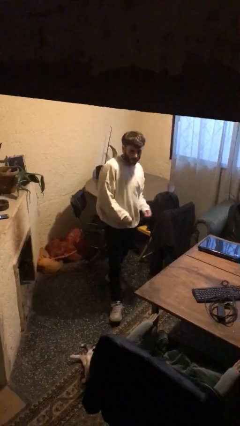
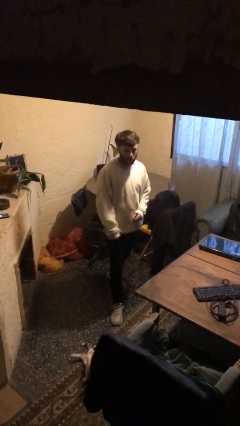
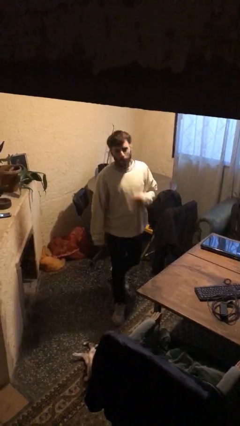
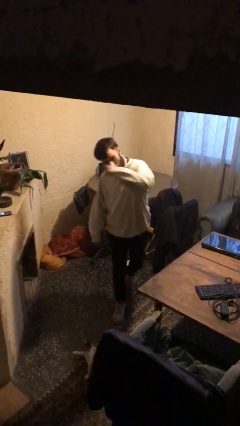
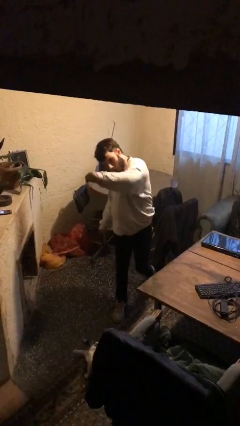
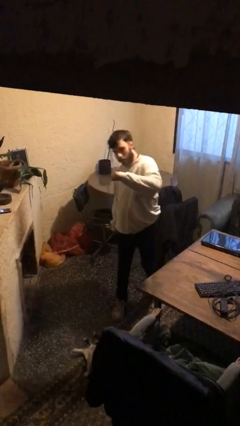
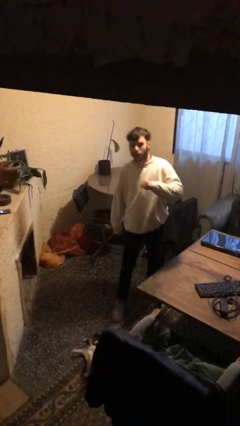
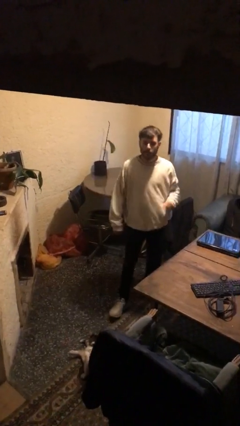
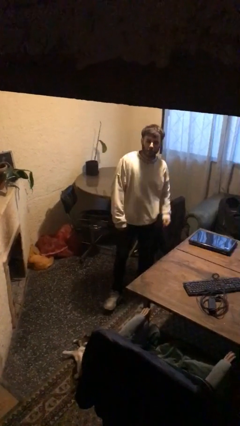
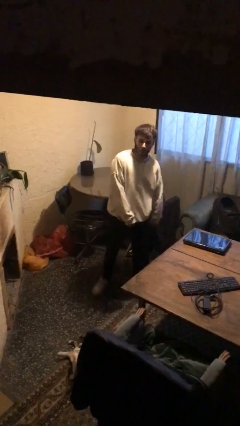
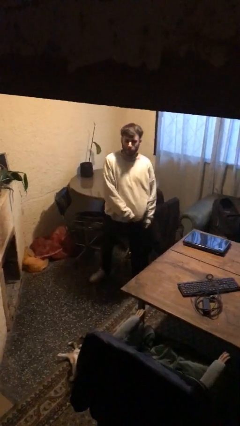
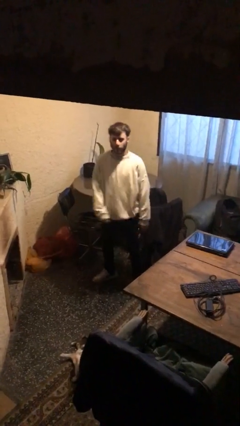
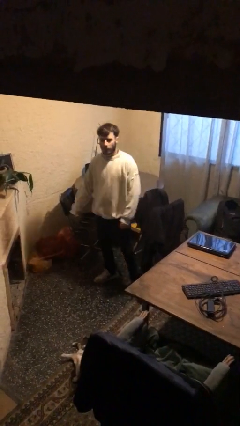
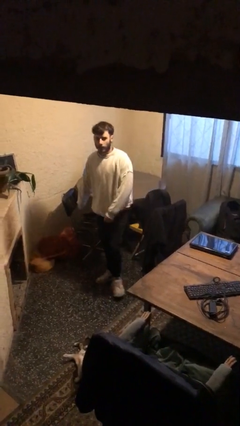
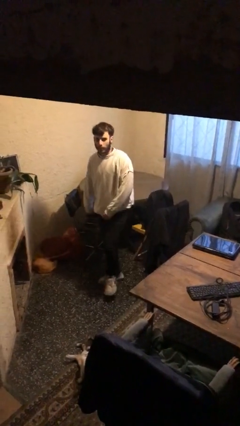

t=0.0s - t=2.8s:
person punches

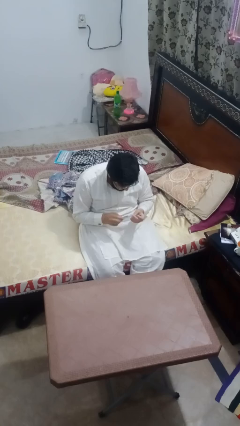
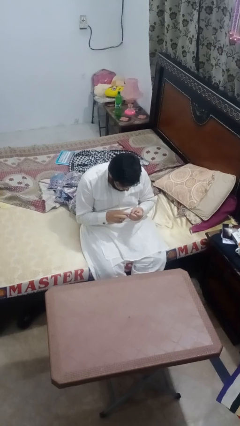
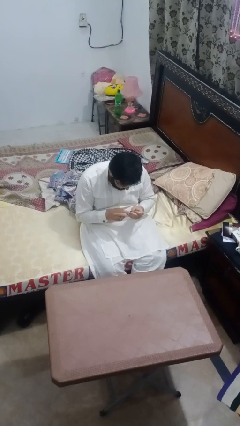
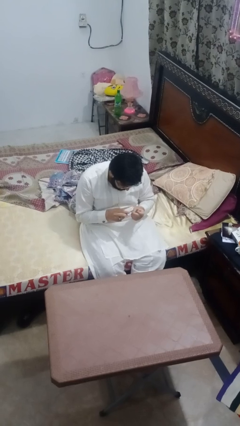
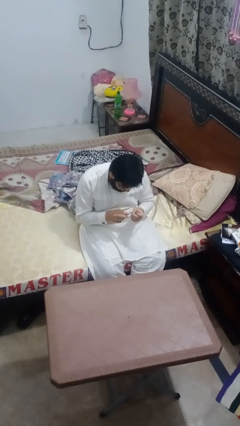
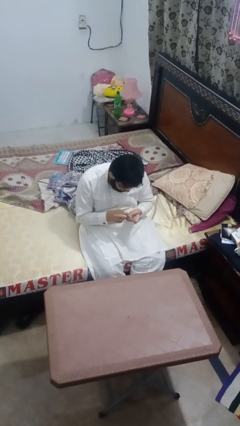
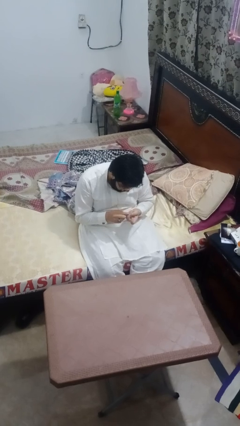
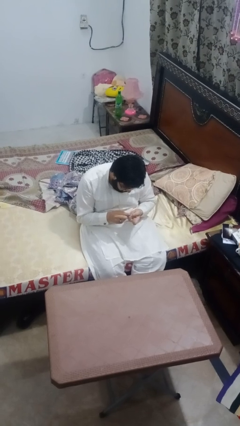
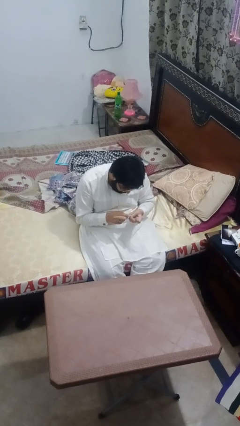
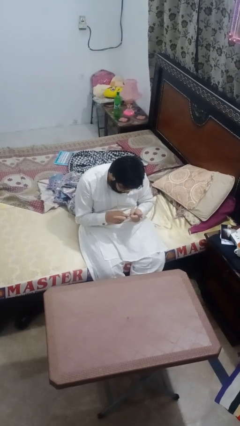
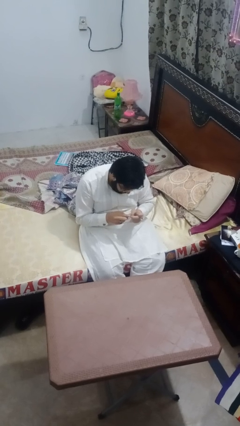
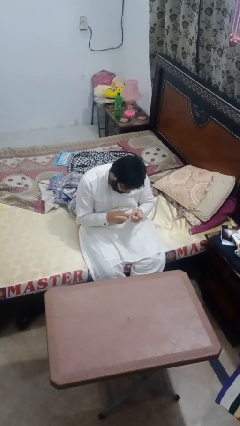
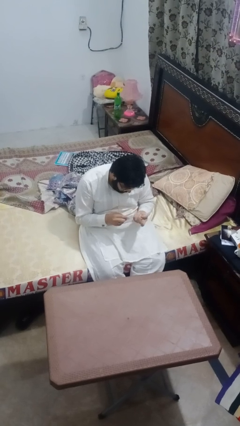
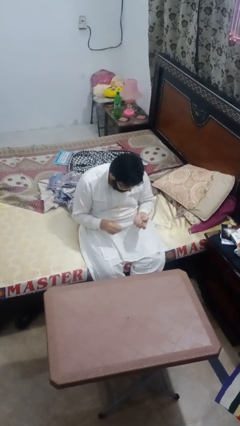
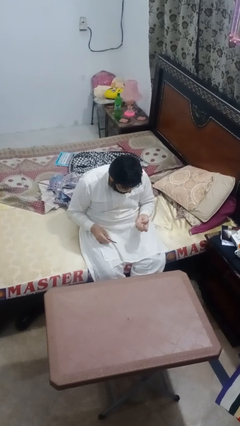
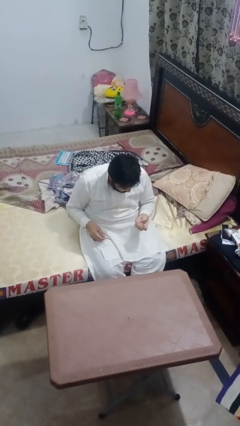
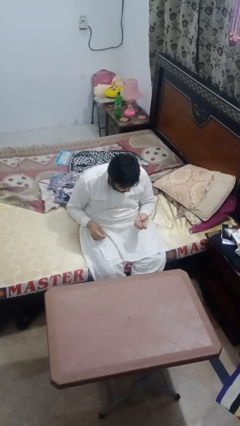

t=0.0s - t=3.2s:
person files fingernails

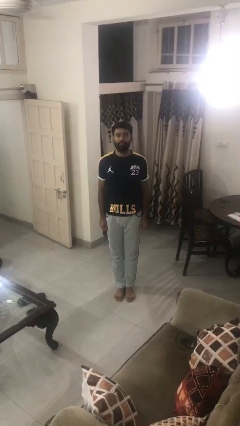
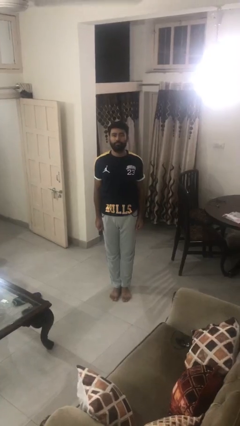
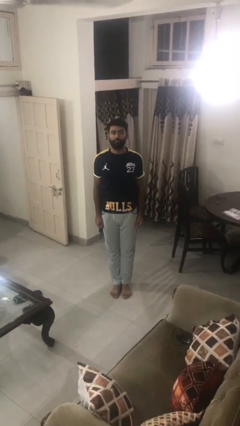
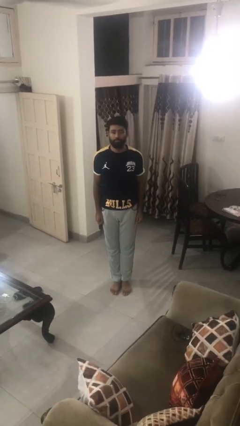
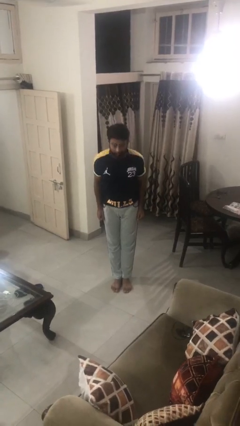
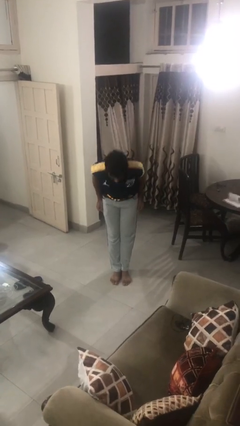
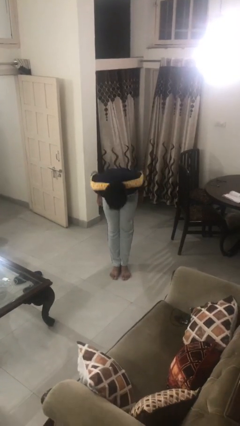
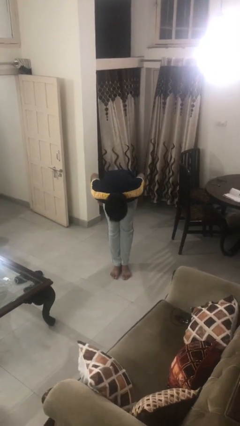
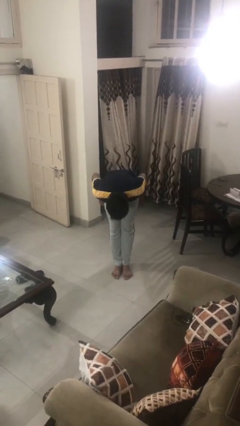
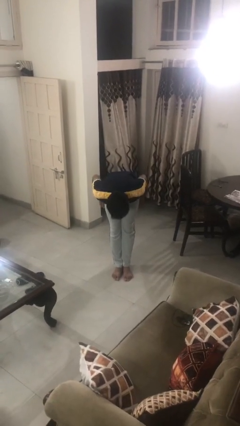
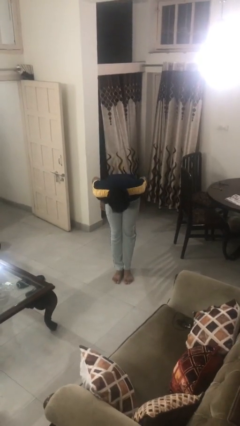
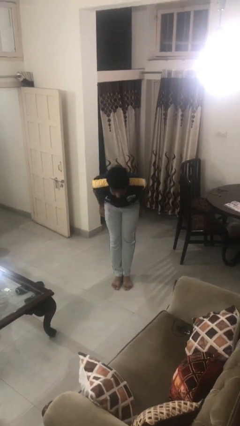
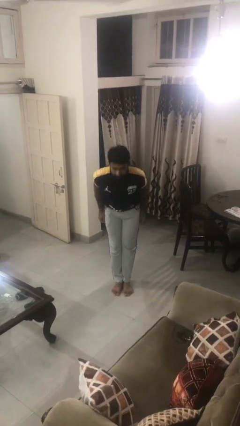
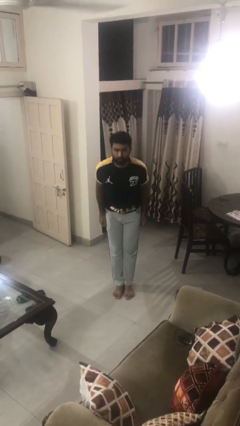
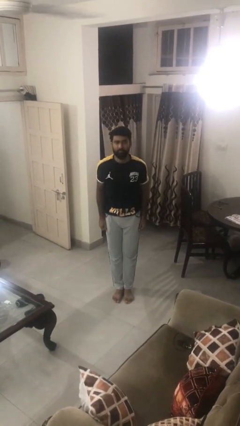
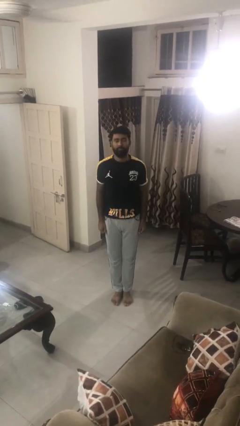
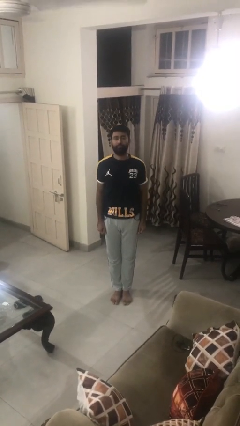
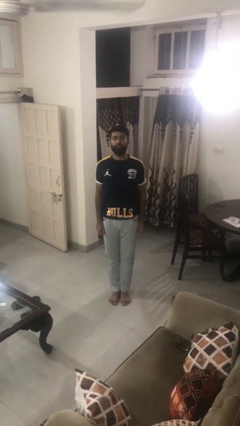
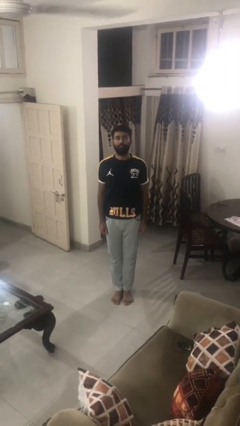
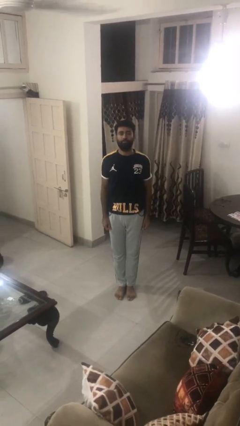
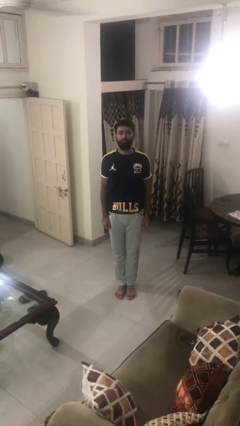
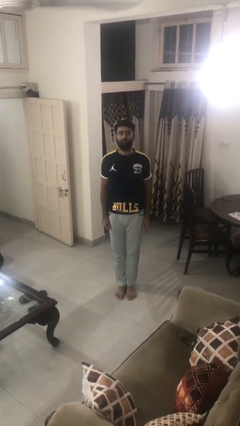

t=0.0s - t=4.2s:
person bows

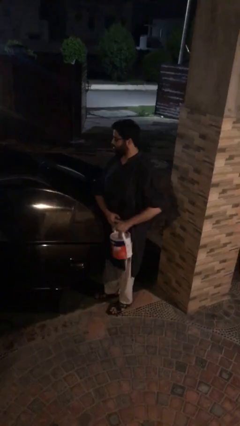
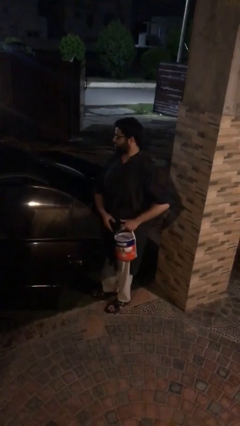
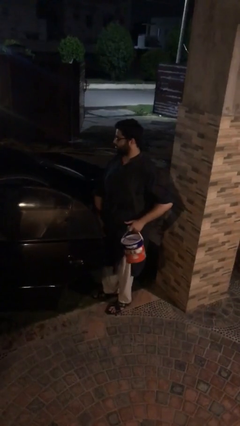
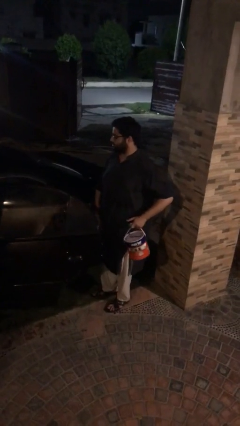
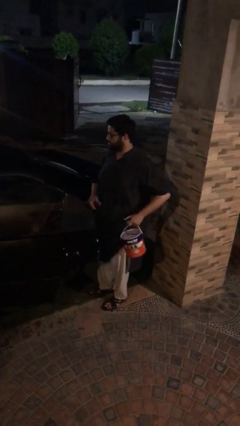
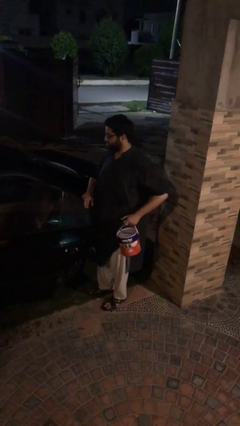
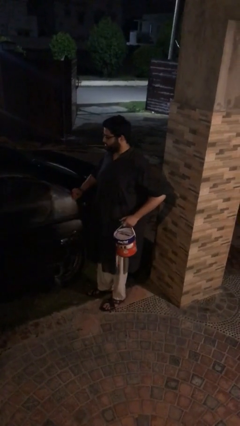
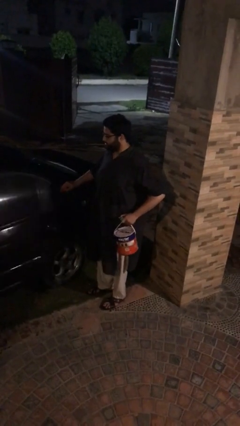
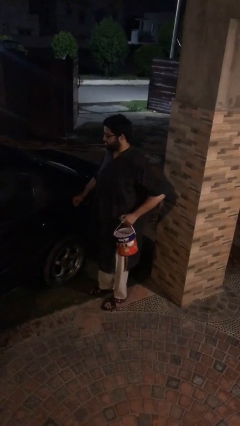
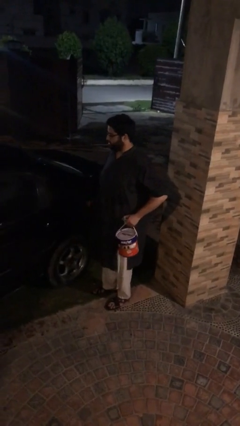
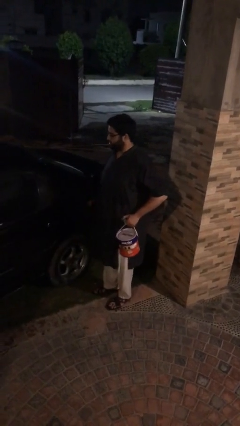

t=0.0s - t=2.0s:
person closes car door

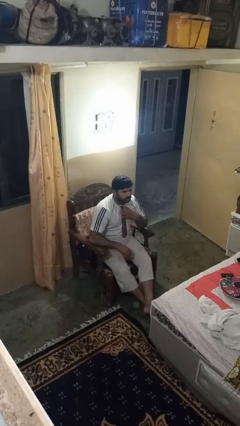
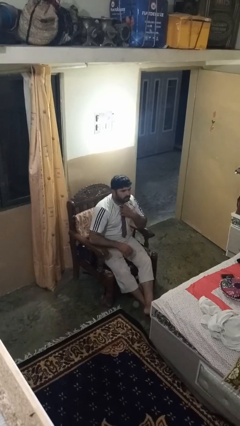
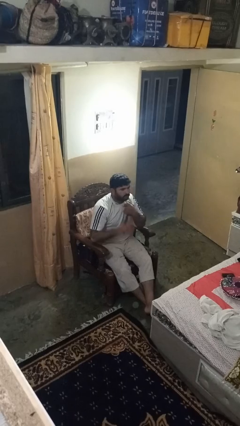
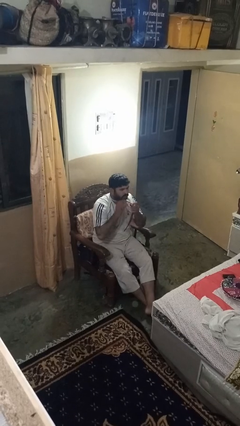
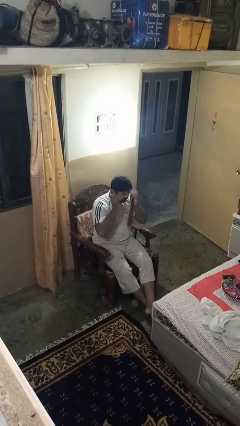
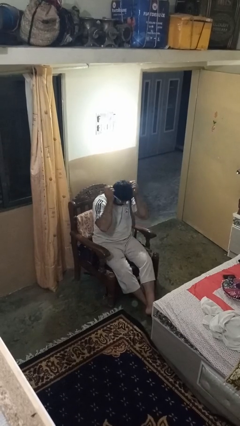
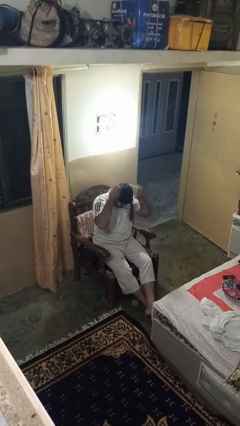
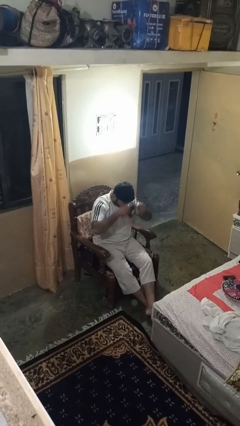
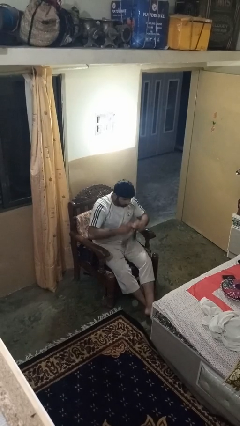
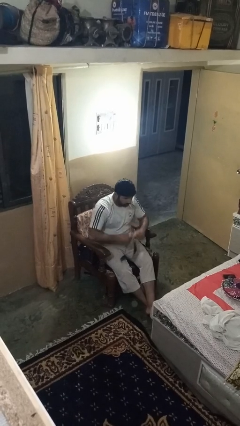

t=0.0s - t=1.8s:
person takes off necktie

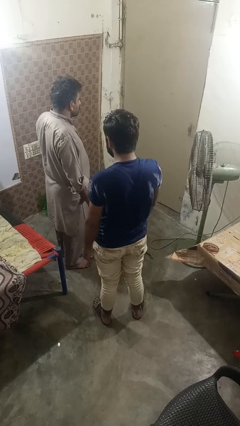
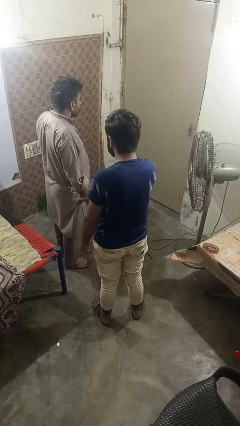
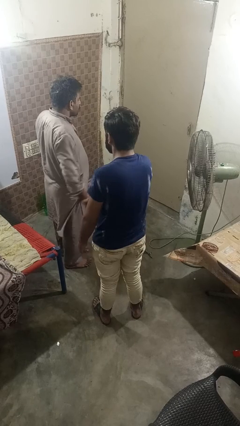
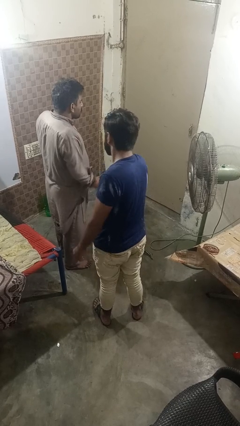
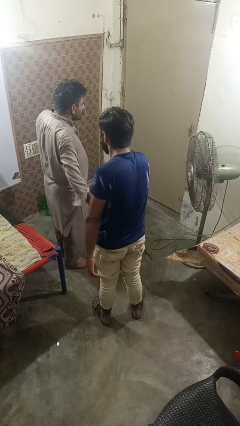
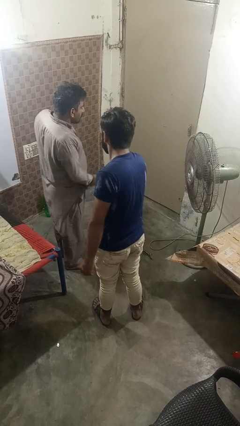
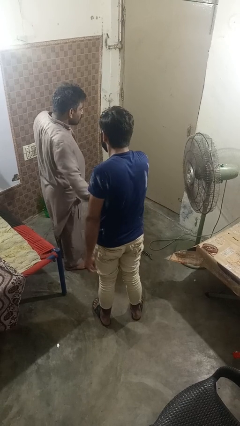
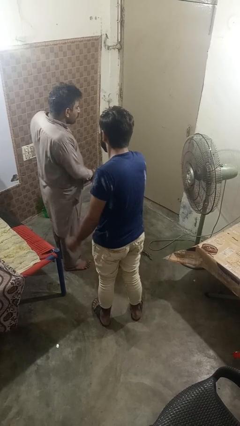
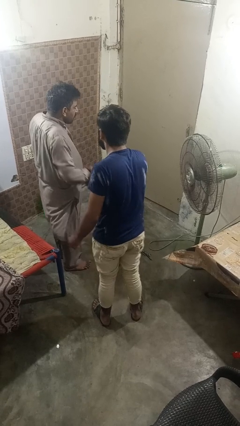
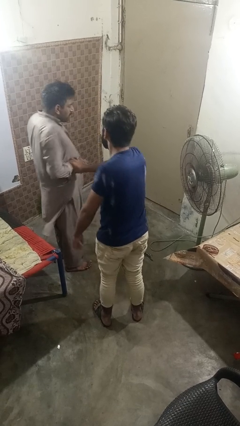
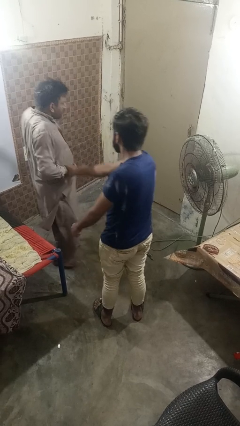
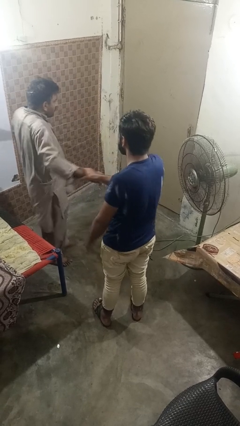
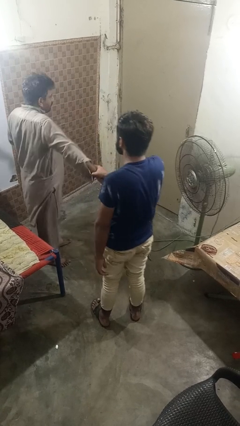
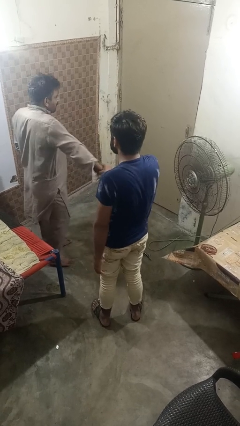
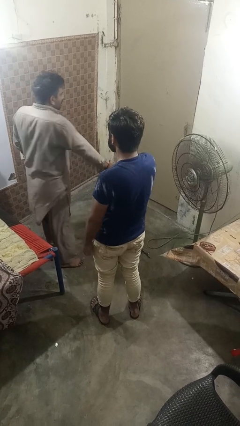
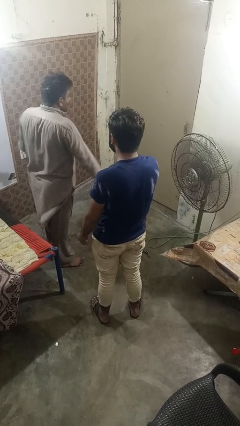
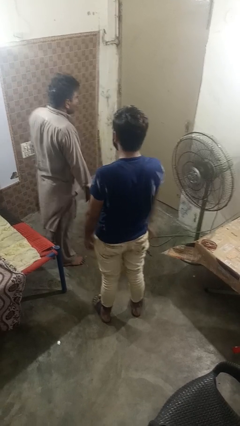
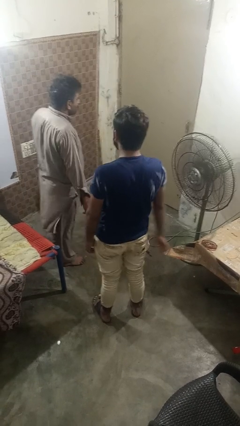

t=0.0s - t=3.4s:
person grabs person by forearm
